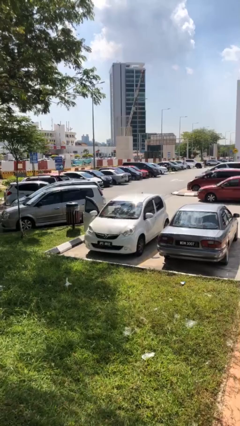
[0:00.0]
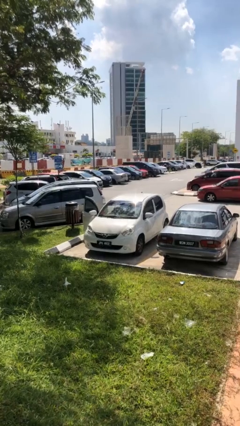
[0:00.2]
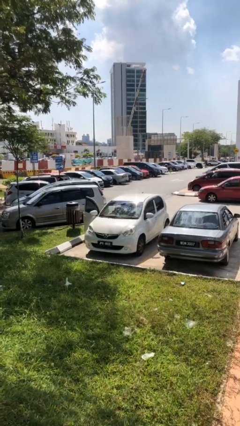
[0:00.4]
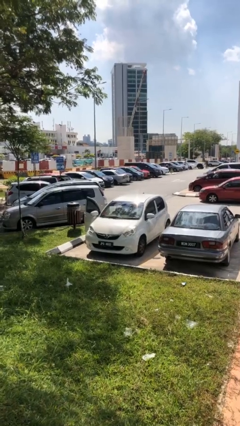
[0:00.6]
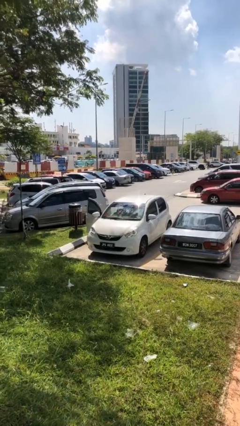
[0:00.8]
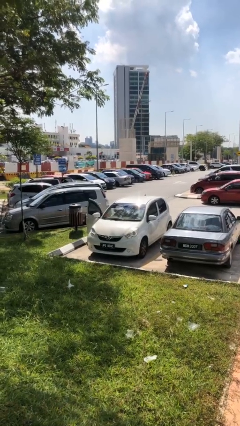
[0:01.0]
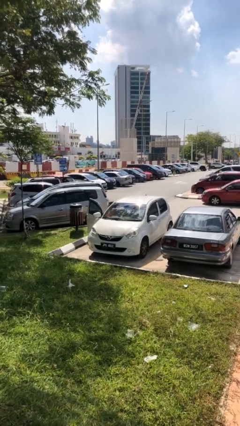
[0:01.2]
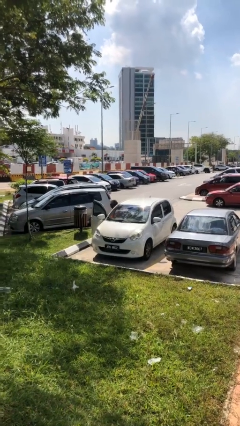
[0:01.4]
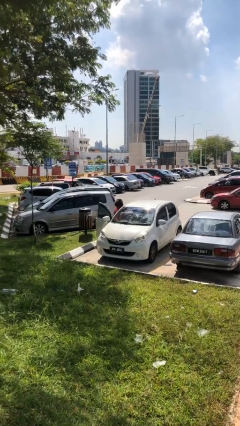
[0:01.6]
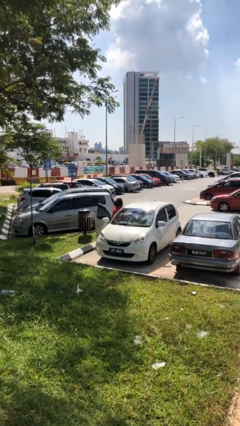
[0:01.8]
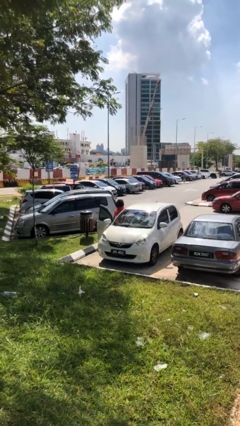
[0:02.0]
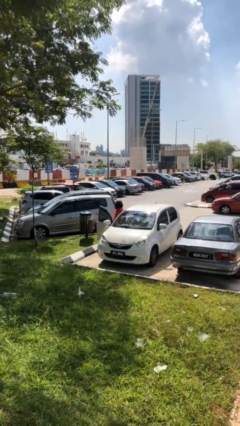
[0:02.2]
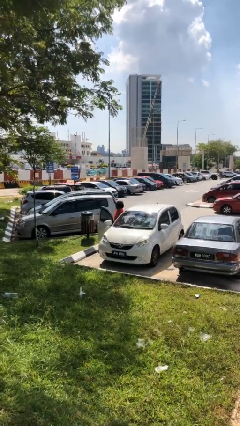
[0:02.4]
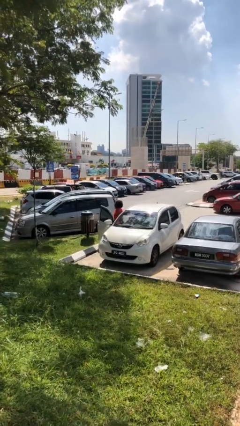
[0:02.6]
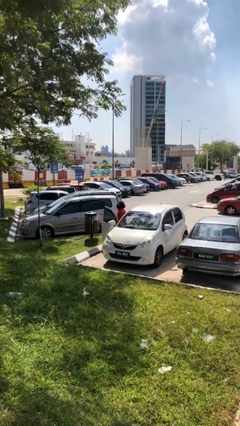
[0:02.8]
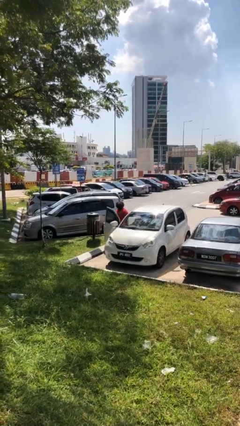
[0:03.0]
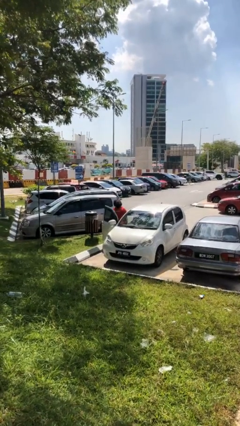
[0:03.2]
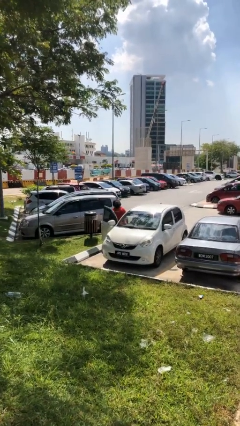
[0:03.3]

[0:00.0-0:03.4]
person exits car

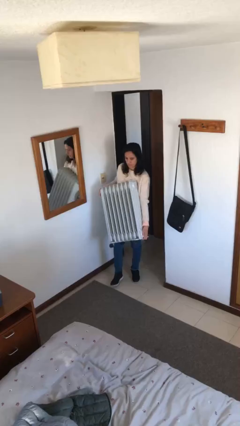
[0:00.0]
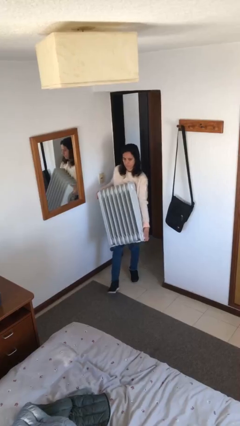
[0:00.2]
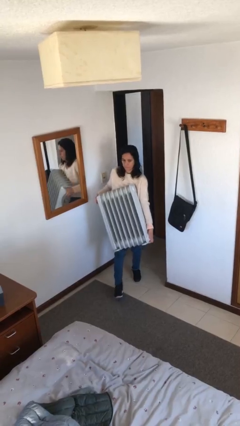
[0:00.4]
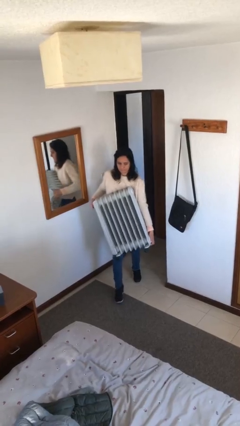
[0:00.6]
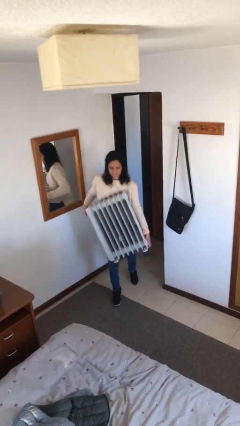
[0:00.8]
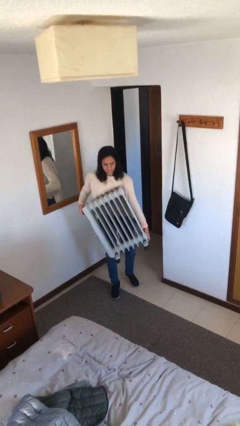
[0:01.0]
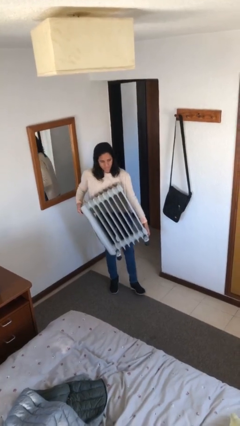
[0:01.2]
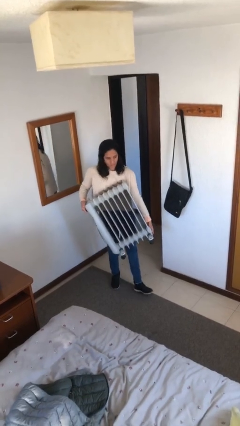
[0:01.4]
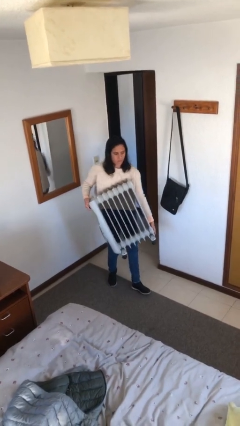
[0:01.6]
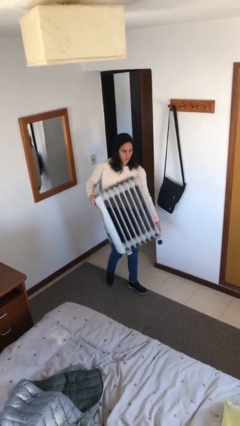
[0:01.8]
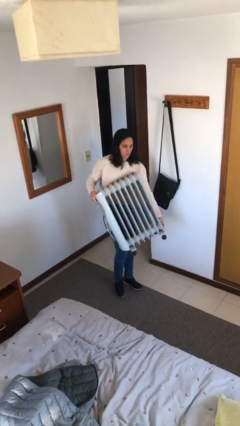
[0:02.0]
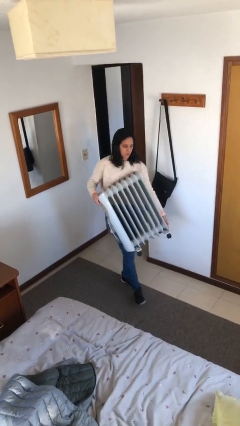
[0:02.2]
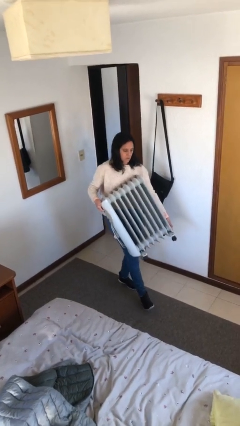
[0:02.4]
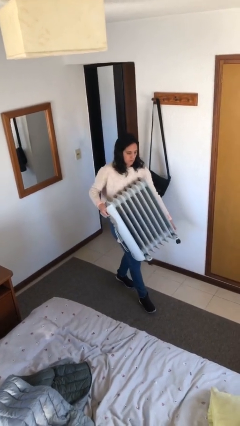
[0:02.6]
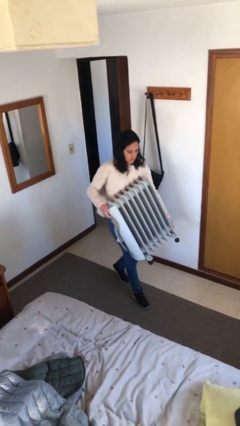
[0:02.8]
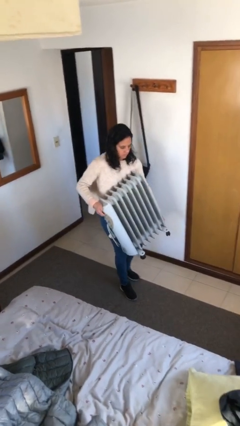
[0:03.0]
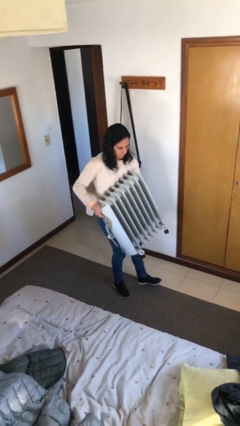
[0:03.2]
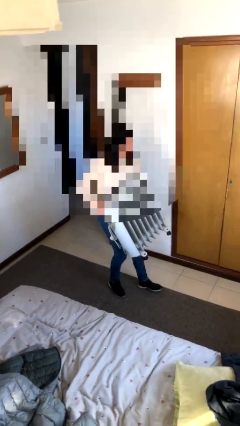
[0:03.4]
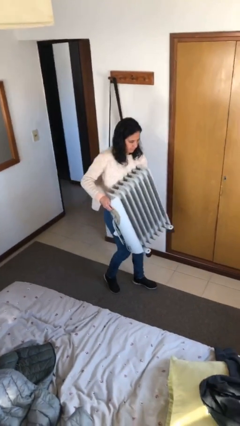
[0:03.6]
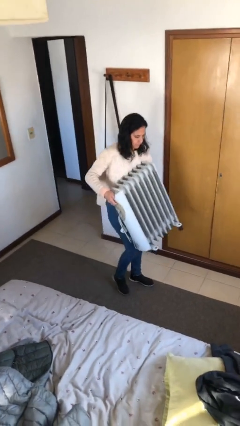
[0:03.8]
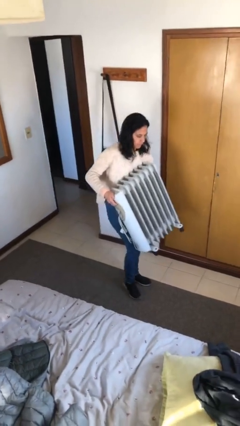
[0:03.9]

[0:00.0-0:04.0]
person carries heavy object

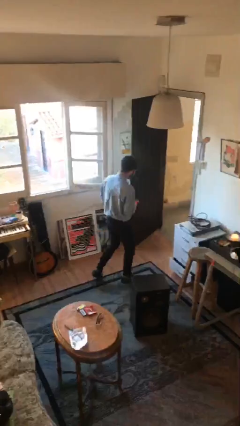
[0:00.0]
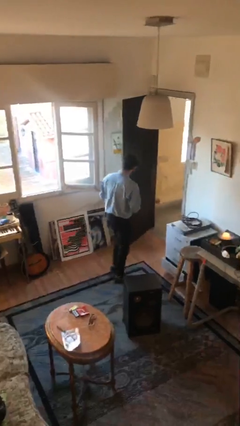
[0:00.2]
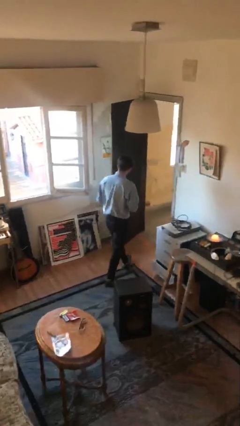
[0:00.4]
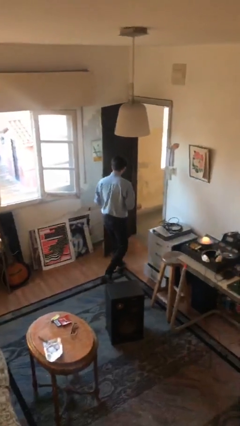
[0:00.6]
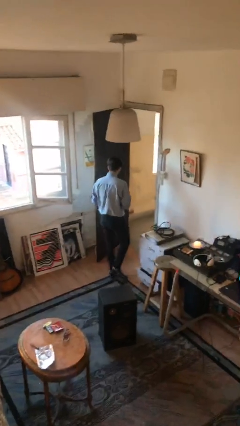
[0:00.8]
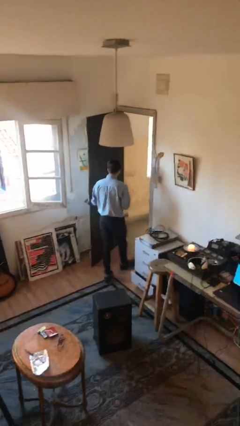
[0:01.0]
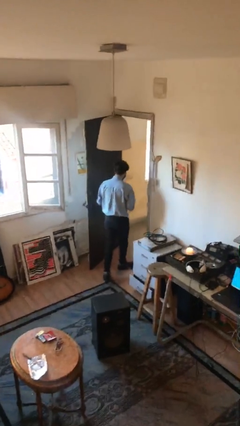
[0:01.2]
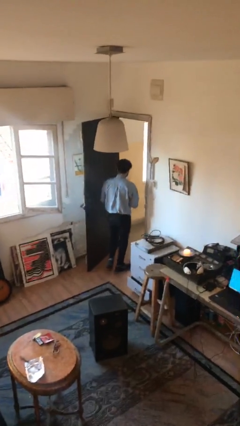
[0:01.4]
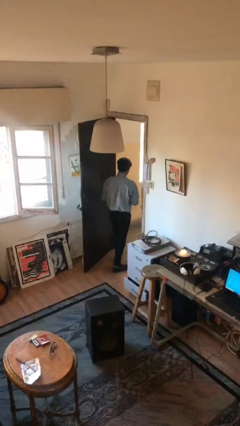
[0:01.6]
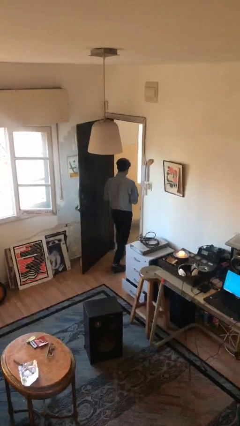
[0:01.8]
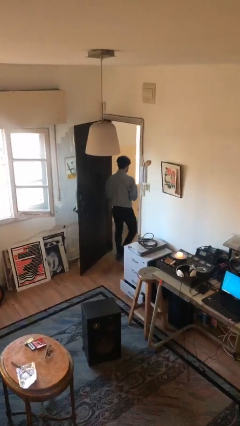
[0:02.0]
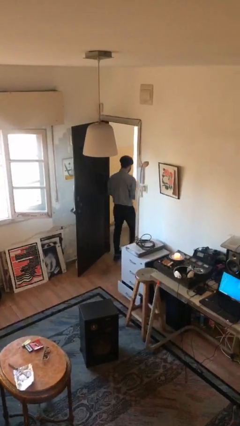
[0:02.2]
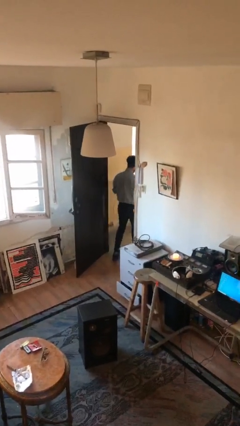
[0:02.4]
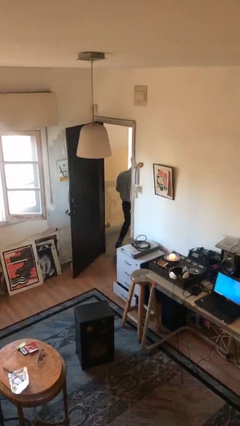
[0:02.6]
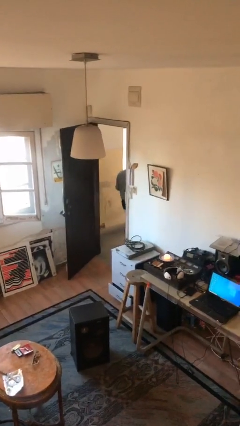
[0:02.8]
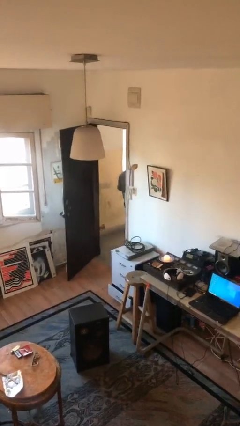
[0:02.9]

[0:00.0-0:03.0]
person texts on phone

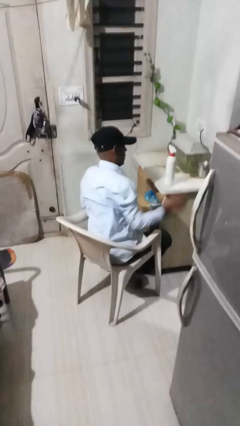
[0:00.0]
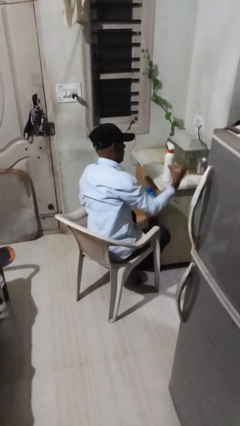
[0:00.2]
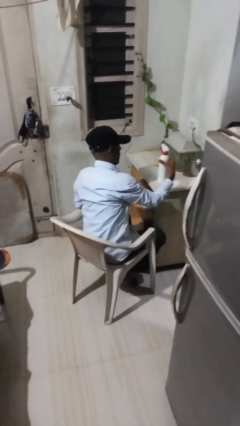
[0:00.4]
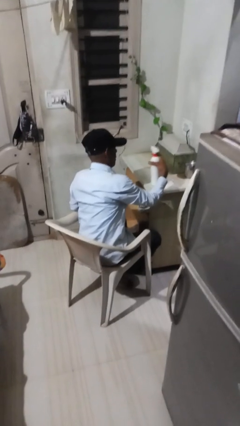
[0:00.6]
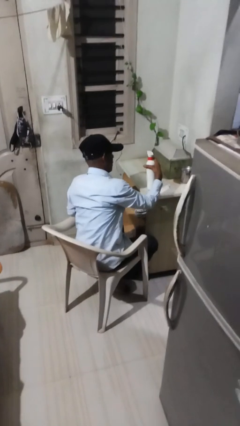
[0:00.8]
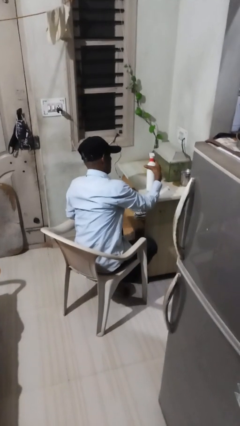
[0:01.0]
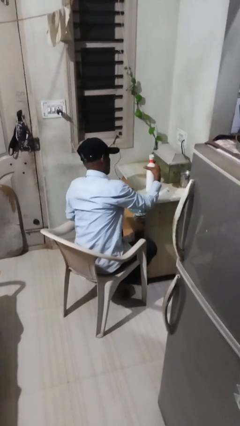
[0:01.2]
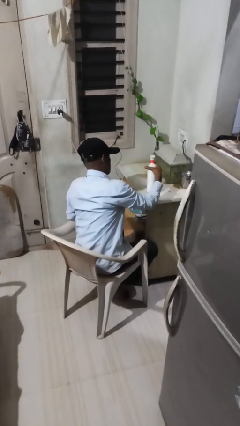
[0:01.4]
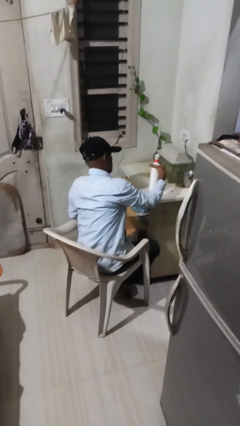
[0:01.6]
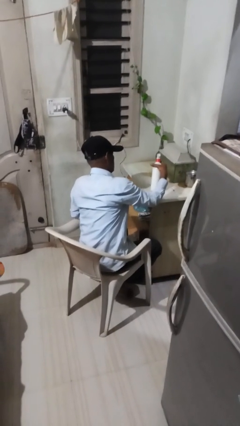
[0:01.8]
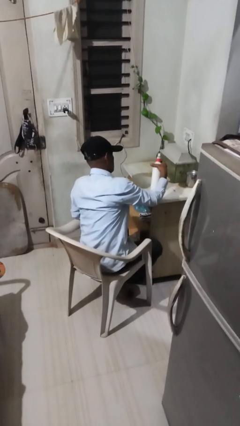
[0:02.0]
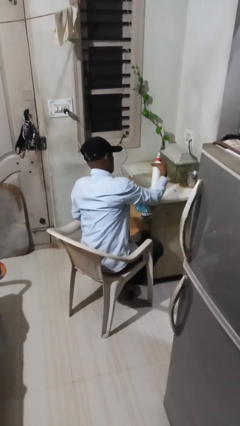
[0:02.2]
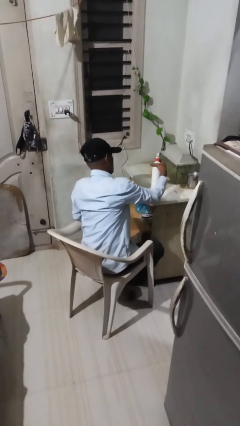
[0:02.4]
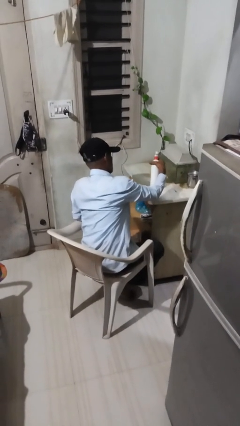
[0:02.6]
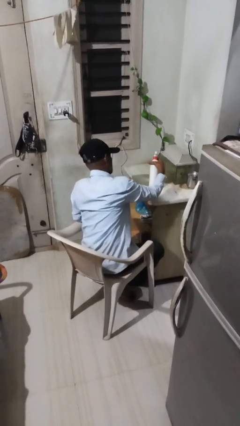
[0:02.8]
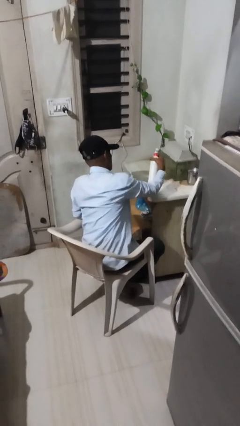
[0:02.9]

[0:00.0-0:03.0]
person sprays from bottle

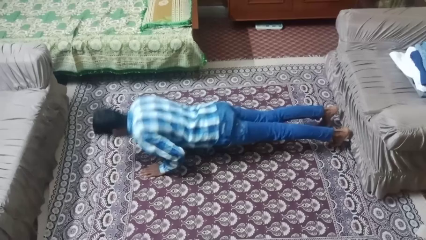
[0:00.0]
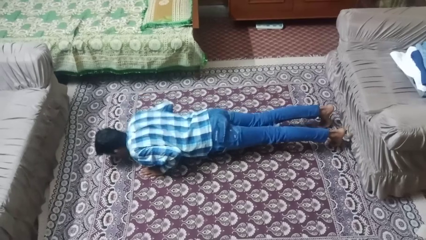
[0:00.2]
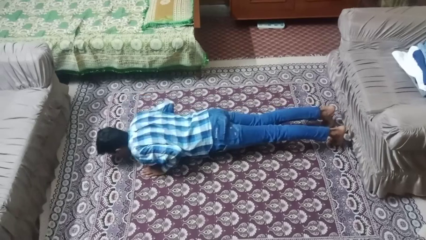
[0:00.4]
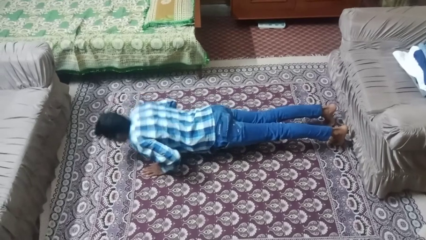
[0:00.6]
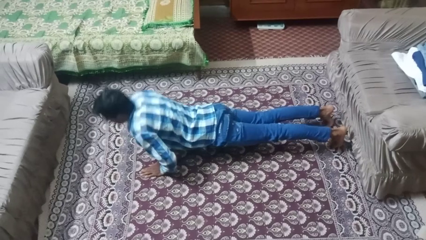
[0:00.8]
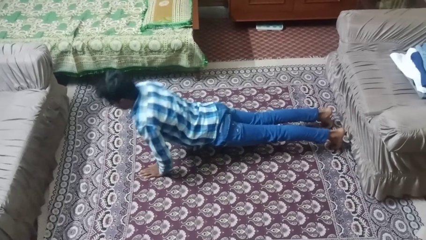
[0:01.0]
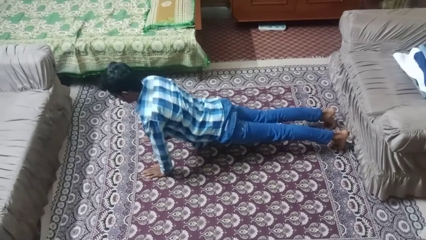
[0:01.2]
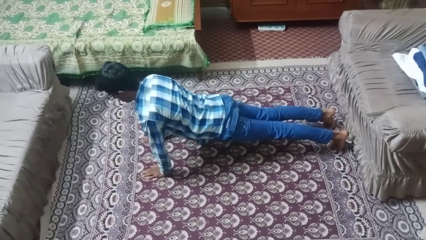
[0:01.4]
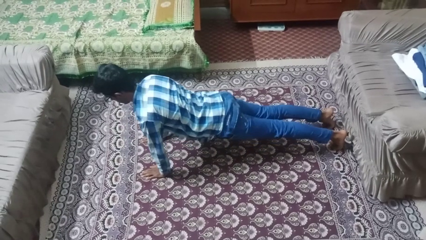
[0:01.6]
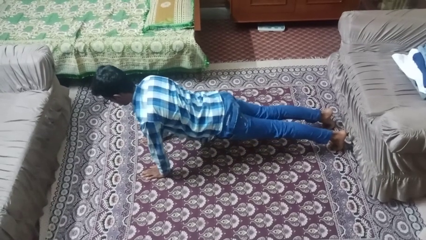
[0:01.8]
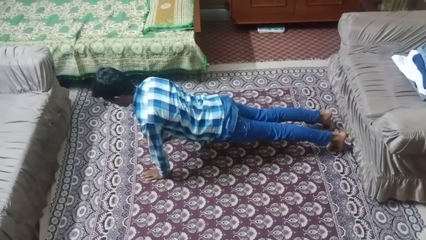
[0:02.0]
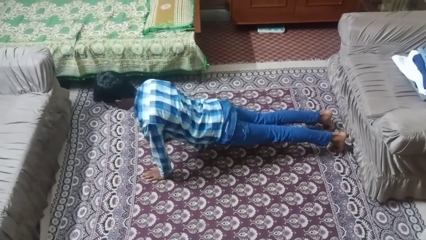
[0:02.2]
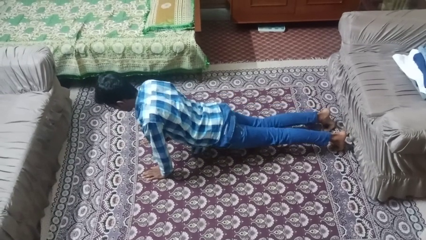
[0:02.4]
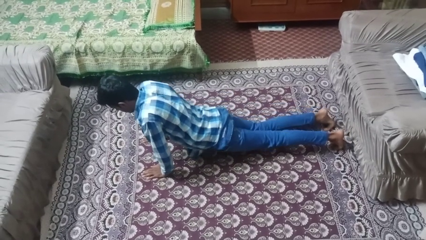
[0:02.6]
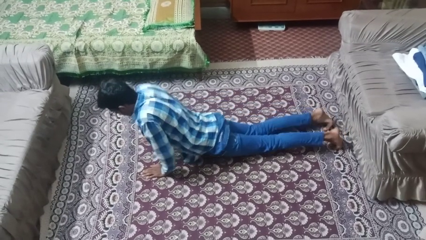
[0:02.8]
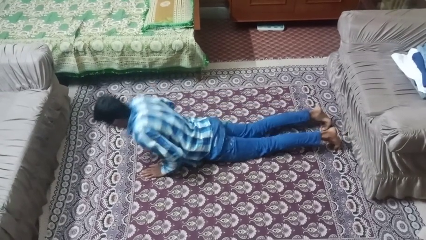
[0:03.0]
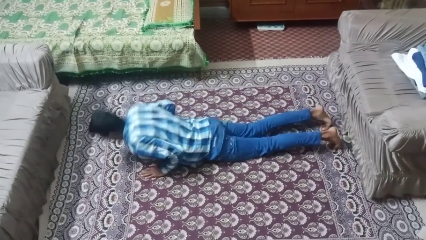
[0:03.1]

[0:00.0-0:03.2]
person exercises with pushup

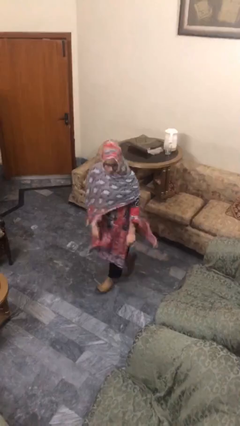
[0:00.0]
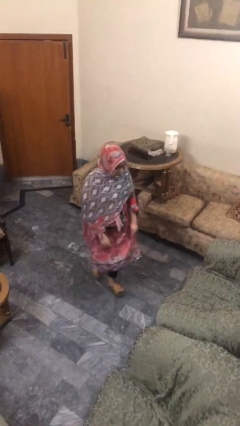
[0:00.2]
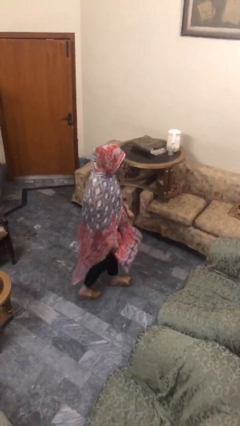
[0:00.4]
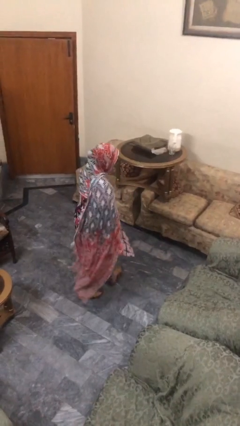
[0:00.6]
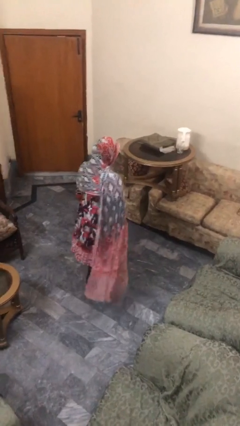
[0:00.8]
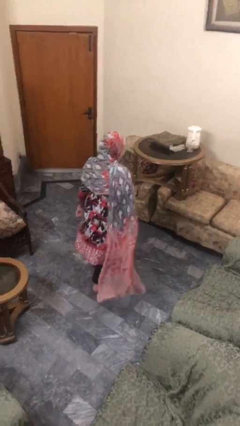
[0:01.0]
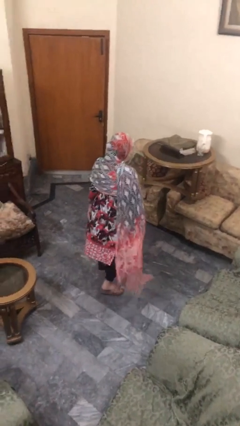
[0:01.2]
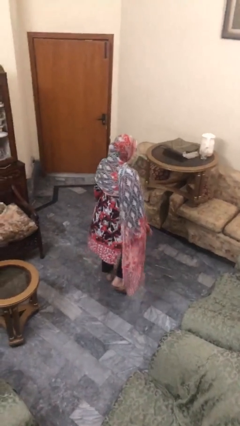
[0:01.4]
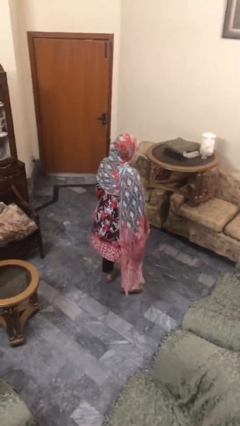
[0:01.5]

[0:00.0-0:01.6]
person twirls
